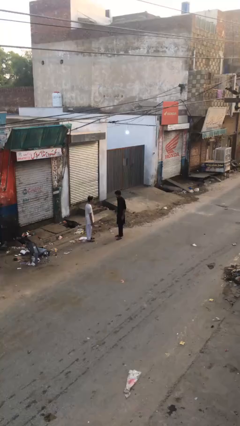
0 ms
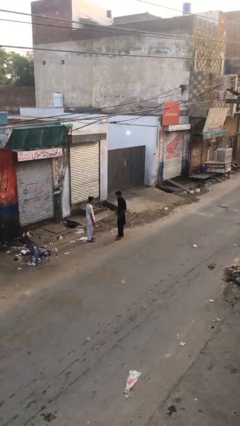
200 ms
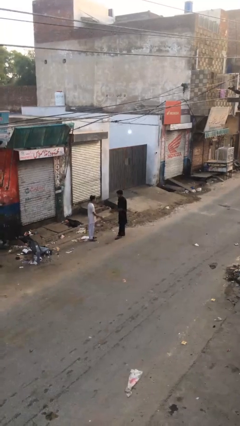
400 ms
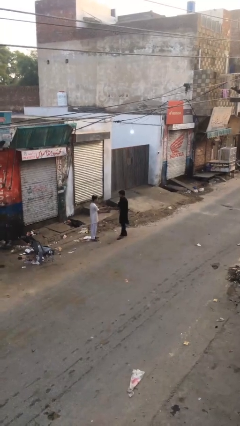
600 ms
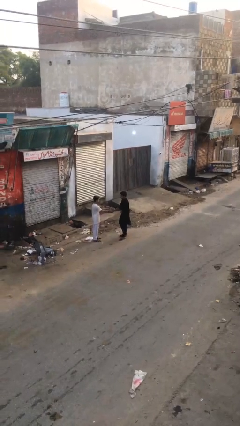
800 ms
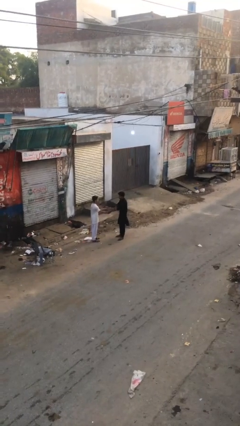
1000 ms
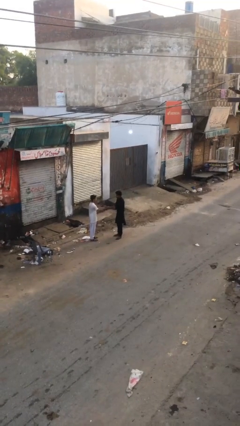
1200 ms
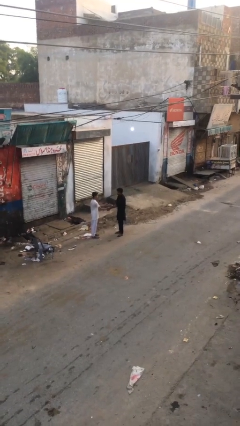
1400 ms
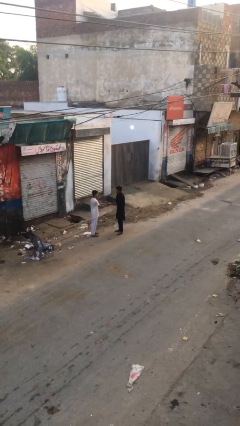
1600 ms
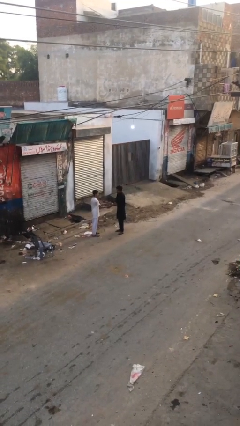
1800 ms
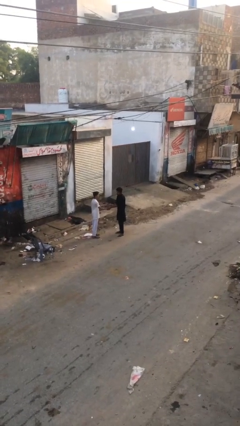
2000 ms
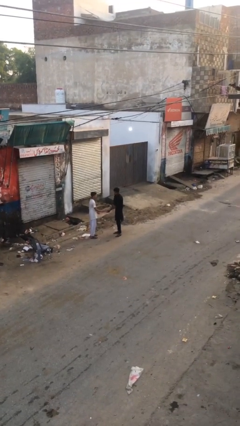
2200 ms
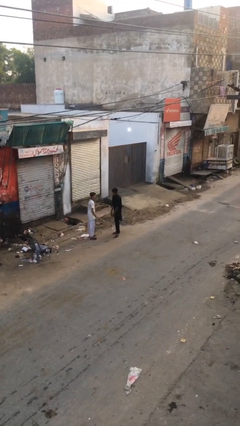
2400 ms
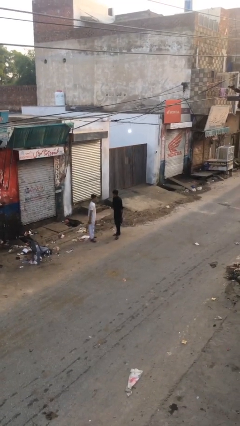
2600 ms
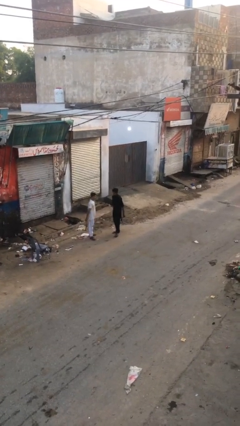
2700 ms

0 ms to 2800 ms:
person shakes hand

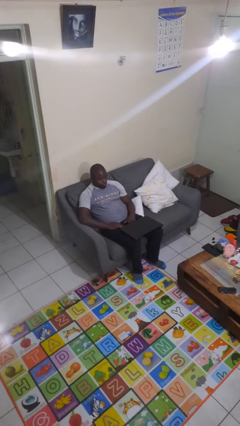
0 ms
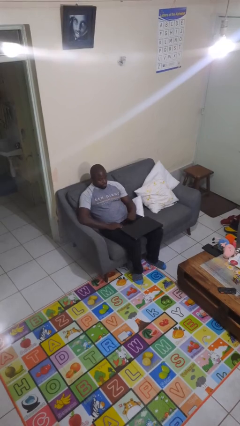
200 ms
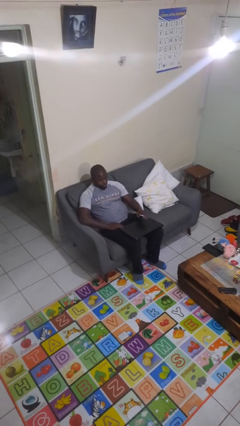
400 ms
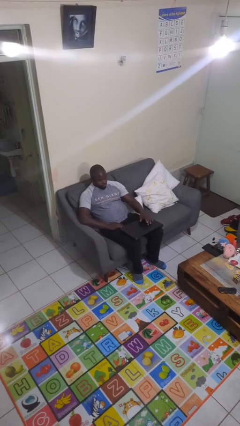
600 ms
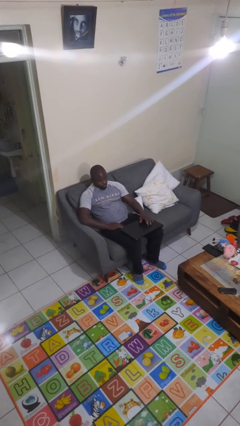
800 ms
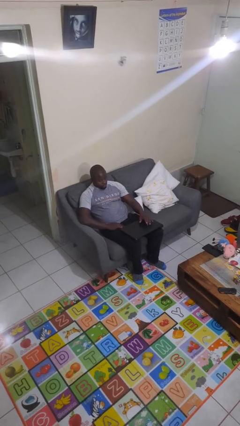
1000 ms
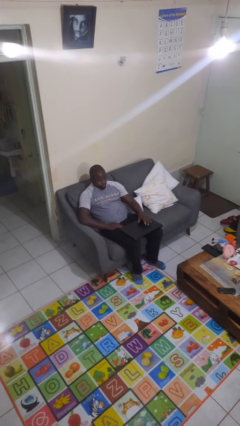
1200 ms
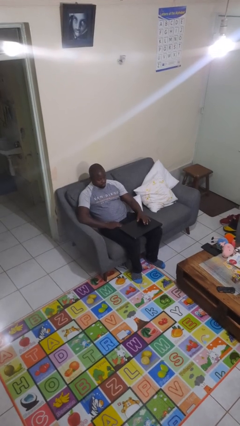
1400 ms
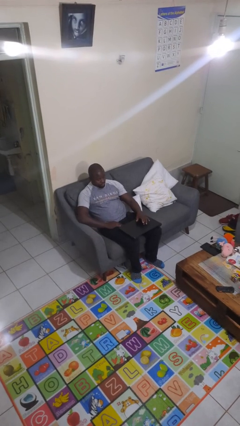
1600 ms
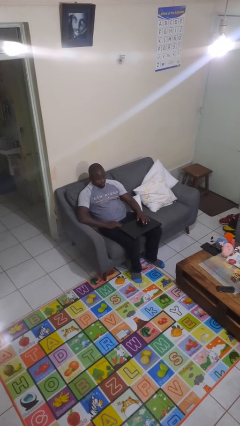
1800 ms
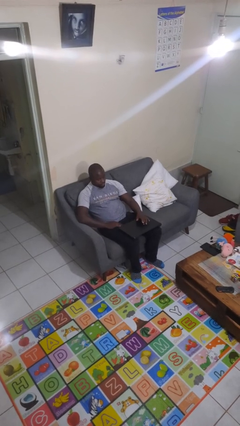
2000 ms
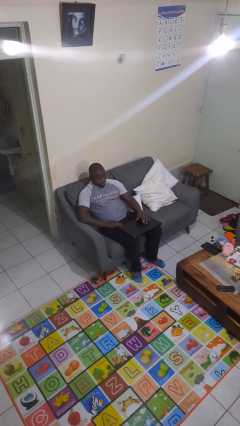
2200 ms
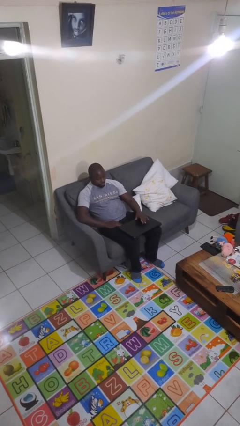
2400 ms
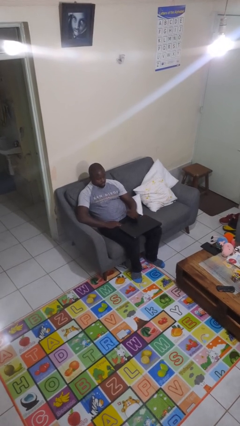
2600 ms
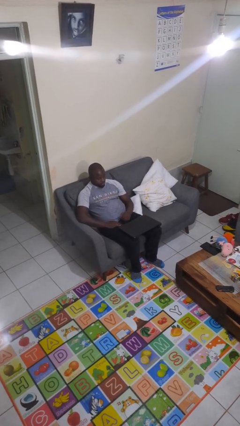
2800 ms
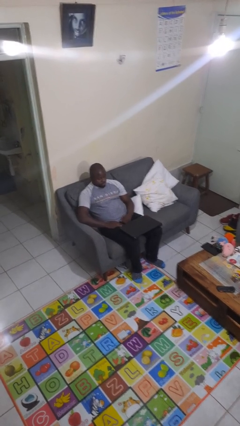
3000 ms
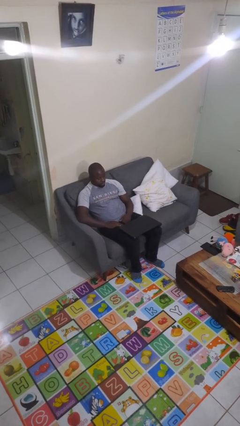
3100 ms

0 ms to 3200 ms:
person taps object with finger

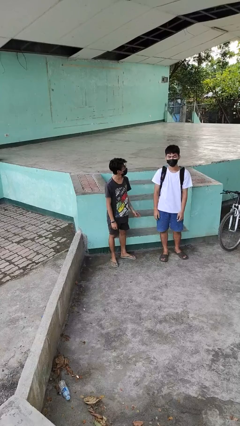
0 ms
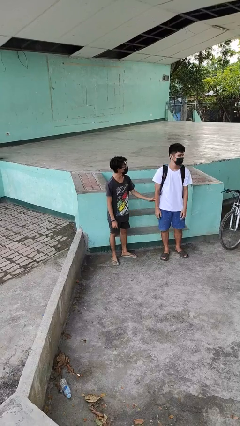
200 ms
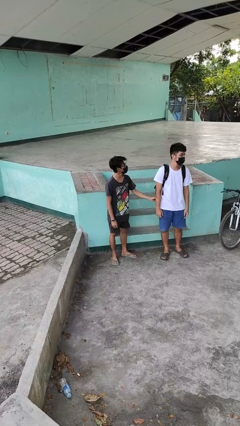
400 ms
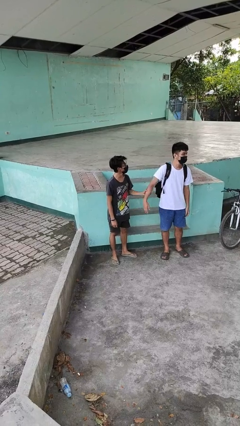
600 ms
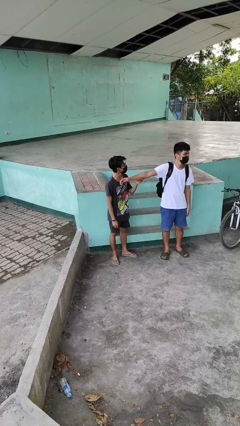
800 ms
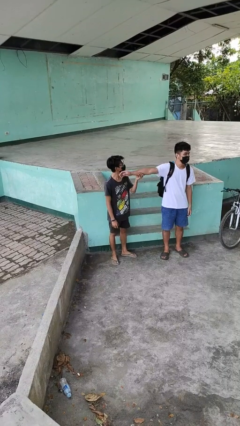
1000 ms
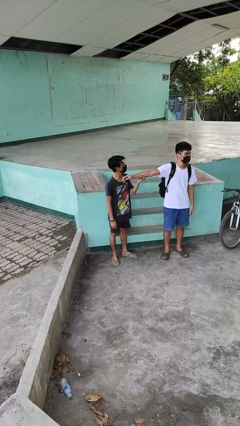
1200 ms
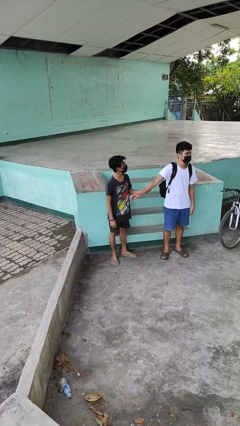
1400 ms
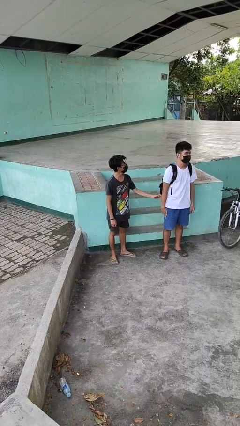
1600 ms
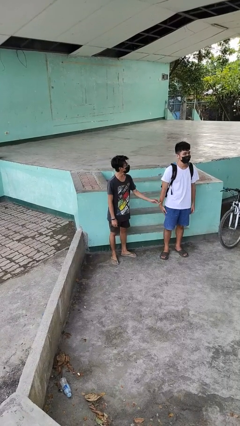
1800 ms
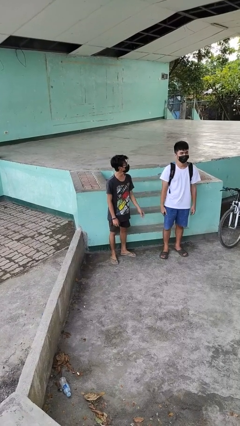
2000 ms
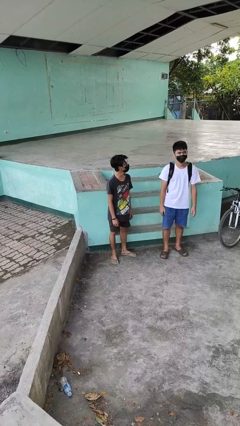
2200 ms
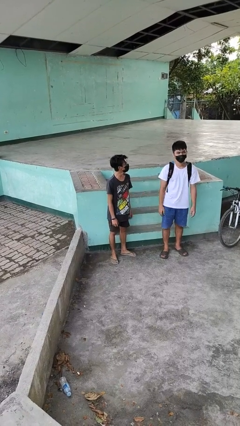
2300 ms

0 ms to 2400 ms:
person grabs person by forearm

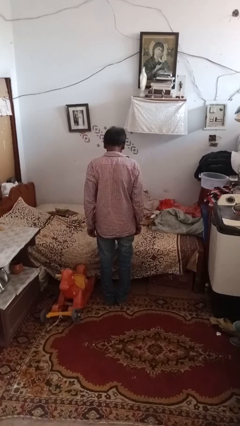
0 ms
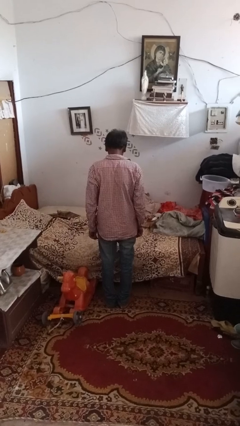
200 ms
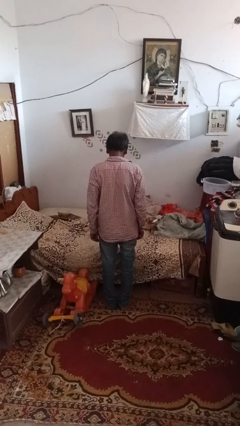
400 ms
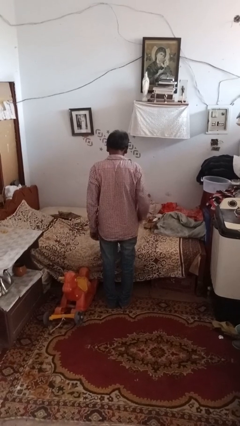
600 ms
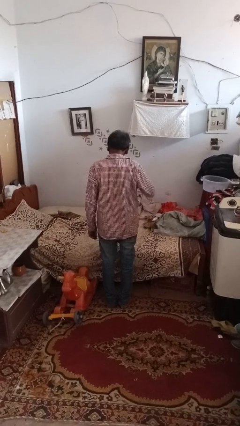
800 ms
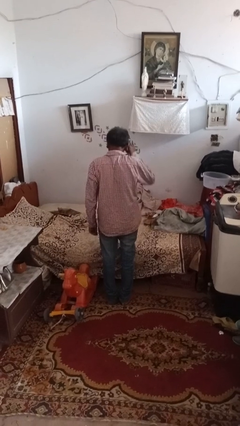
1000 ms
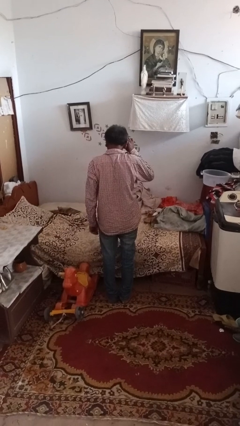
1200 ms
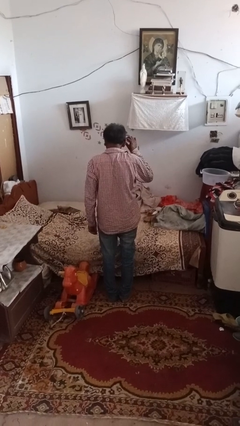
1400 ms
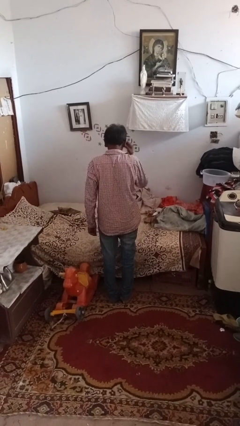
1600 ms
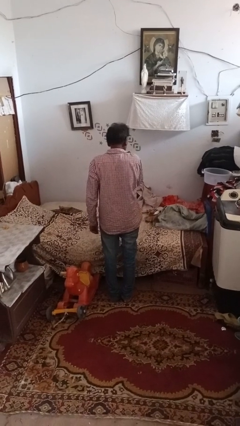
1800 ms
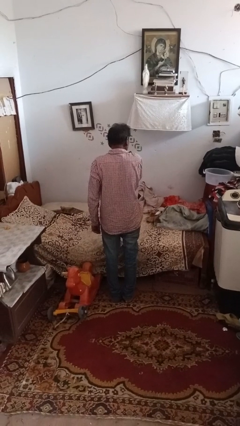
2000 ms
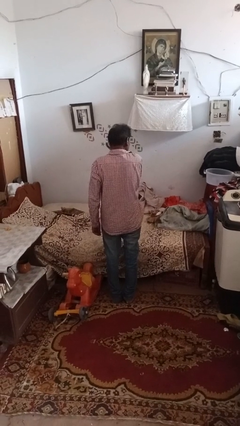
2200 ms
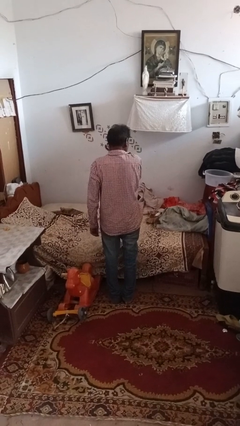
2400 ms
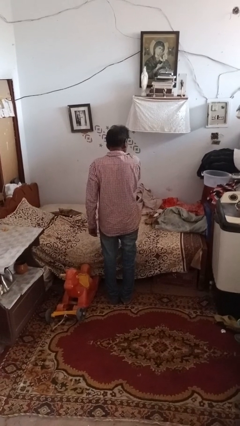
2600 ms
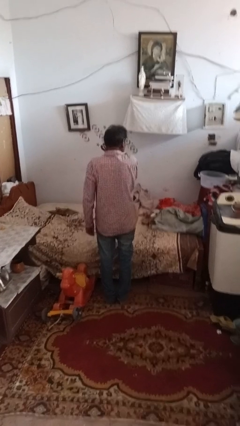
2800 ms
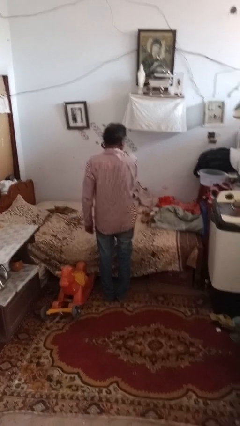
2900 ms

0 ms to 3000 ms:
person shades eyes

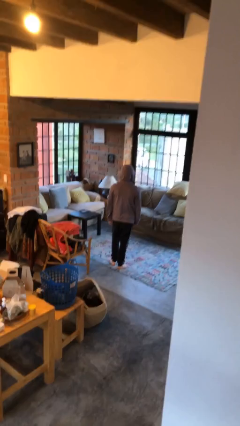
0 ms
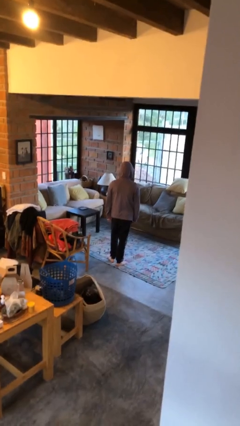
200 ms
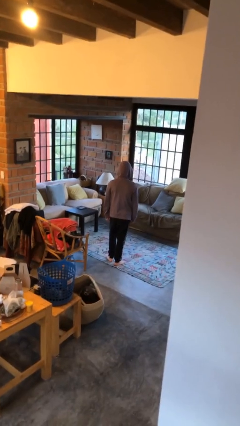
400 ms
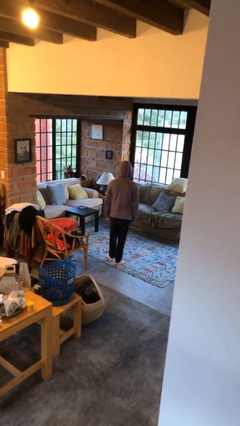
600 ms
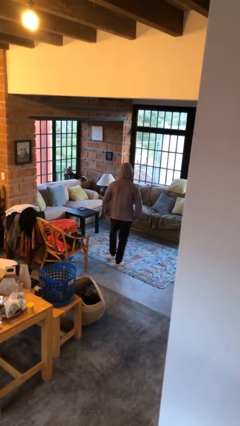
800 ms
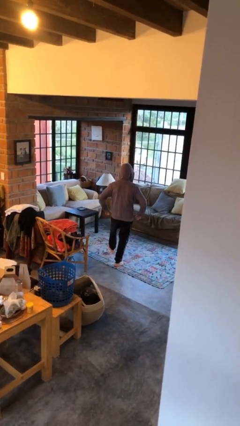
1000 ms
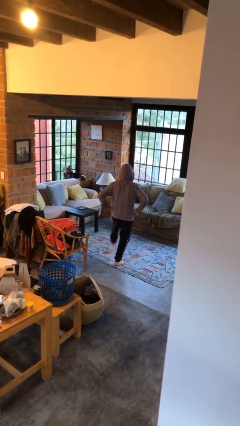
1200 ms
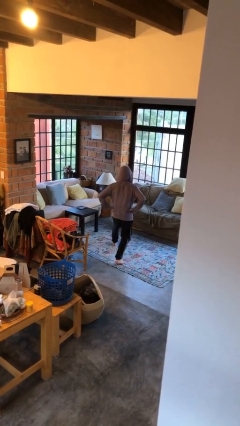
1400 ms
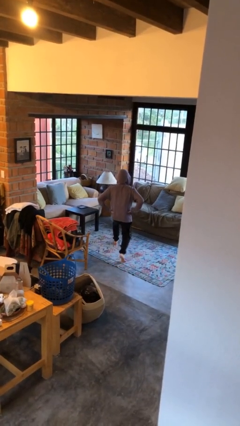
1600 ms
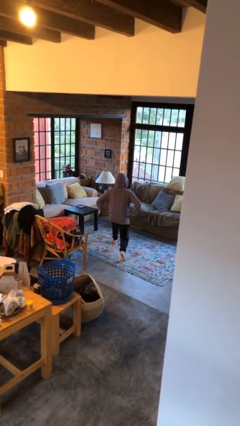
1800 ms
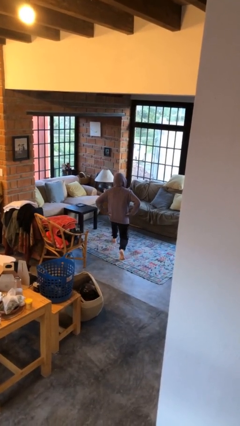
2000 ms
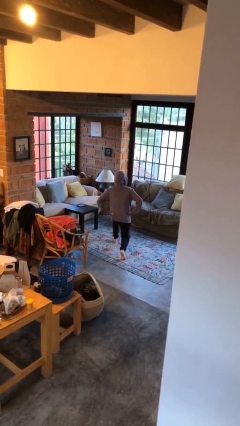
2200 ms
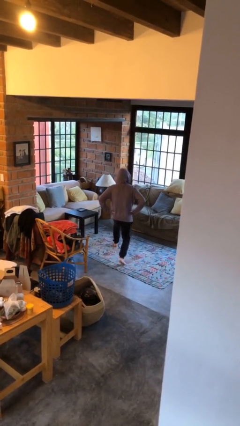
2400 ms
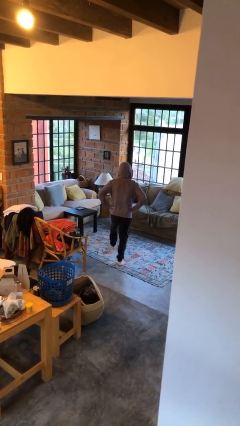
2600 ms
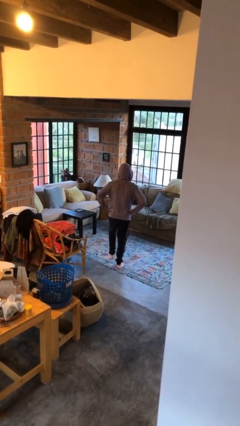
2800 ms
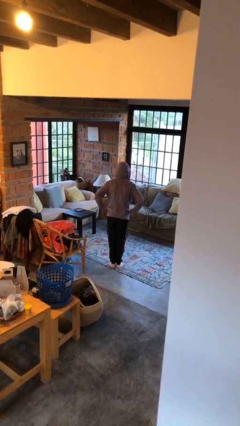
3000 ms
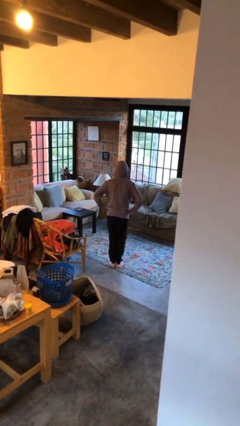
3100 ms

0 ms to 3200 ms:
person exercises with lunges

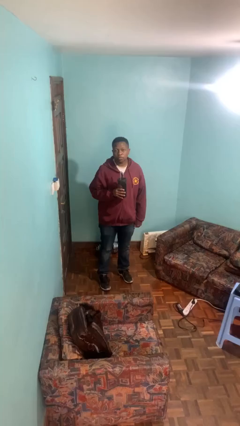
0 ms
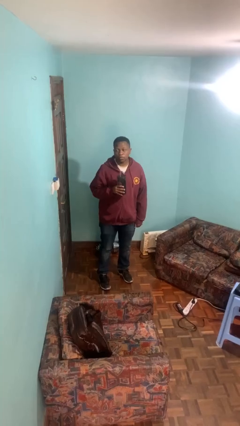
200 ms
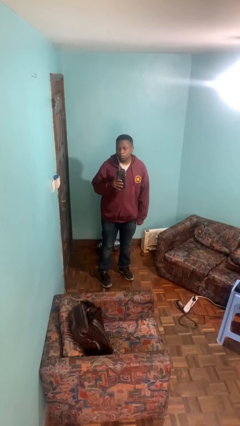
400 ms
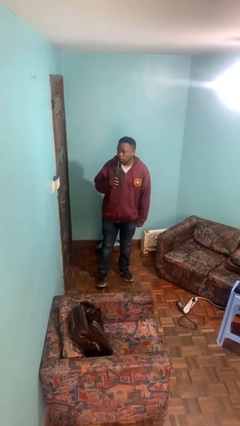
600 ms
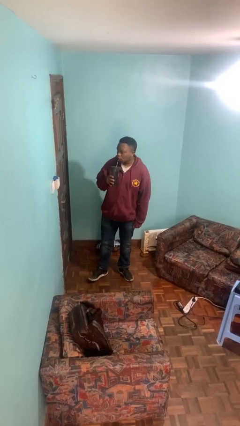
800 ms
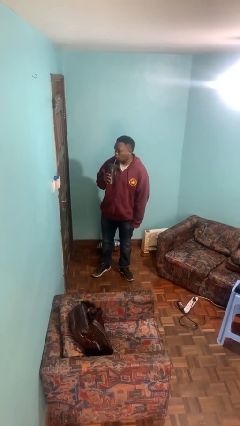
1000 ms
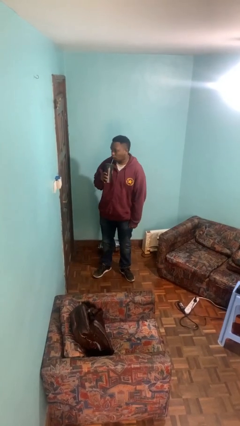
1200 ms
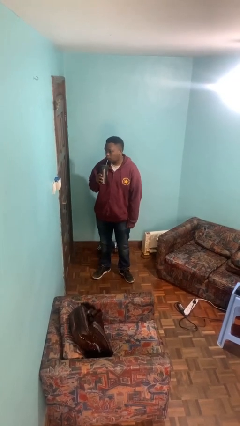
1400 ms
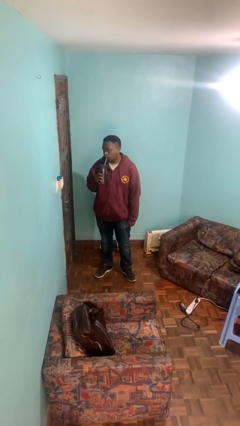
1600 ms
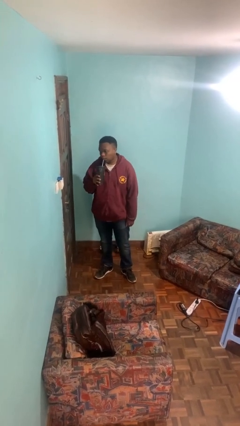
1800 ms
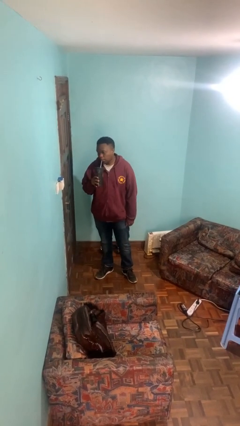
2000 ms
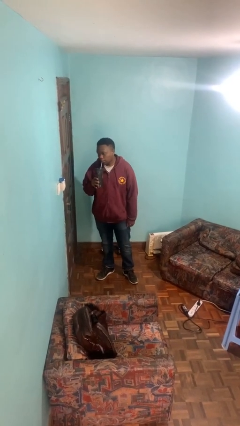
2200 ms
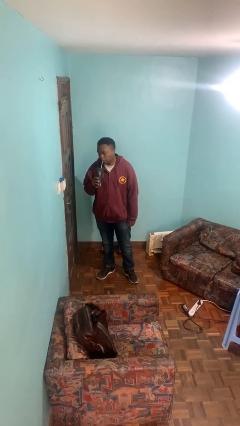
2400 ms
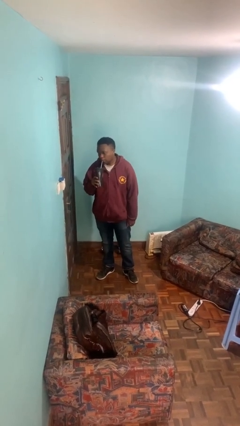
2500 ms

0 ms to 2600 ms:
person drinks from straw
